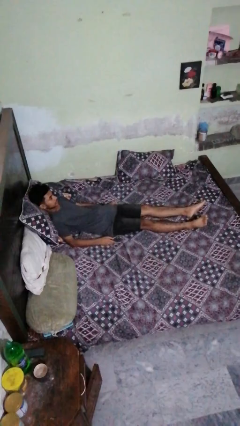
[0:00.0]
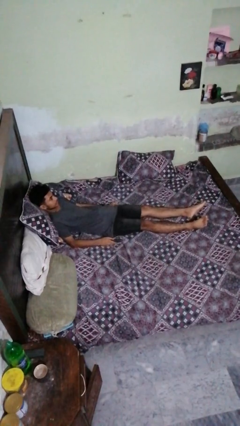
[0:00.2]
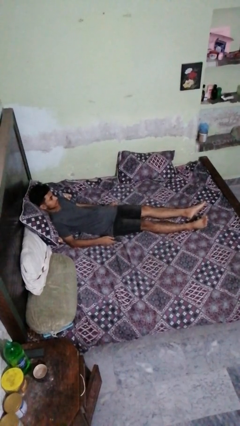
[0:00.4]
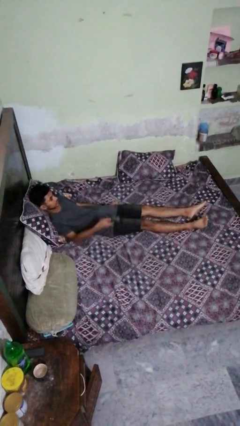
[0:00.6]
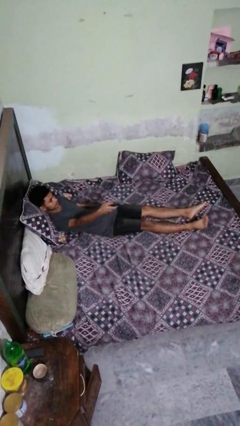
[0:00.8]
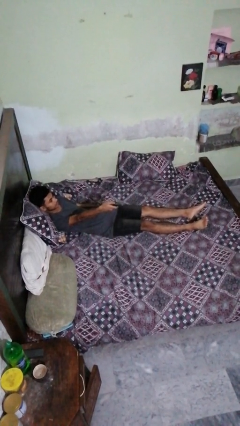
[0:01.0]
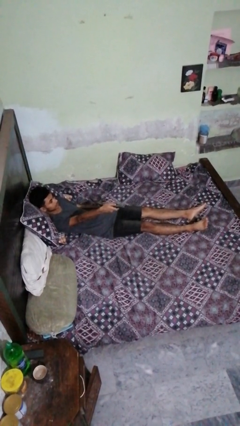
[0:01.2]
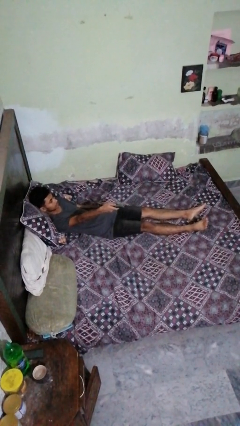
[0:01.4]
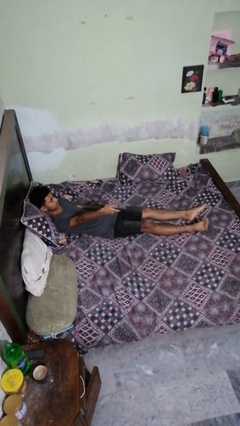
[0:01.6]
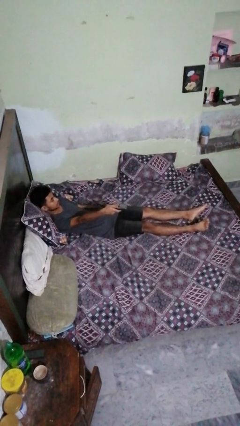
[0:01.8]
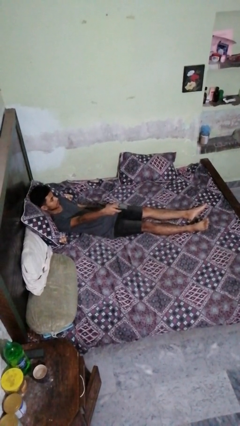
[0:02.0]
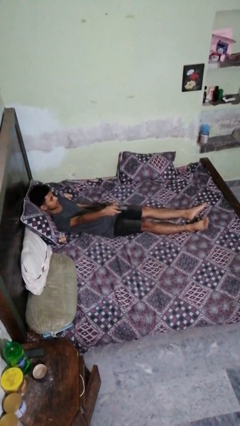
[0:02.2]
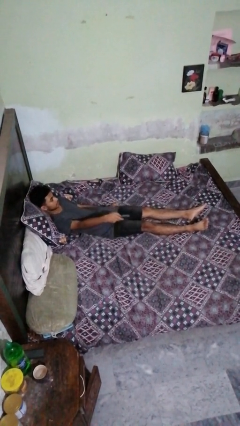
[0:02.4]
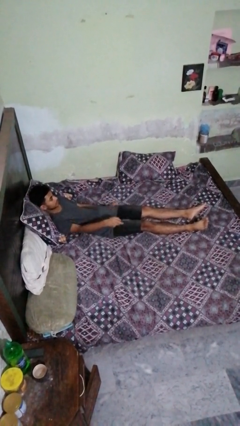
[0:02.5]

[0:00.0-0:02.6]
person uses television remote

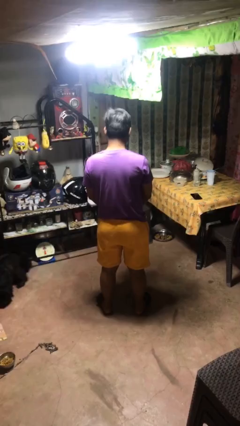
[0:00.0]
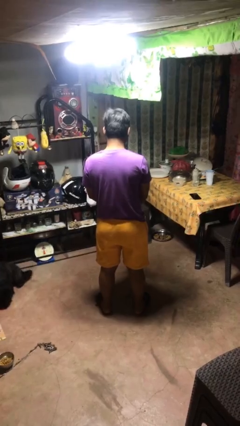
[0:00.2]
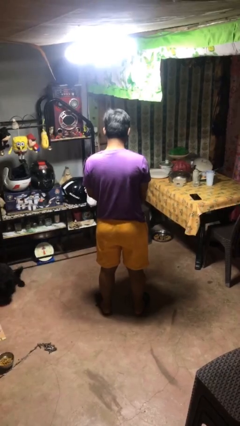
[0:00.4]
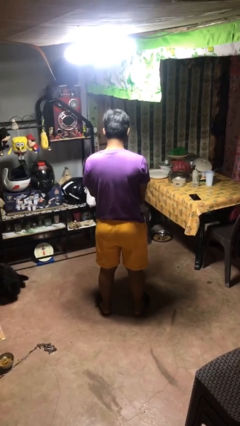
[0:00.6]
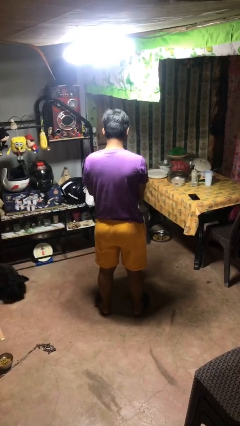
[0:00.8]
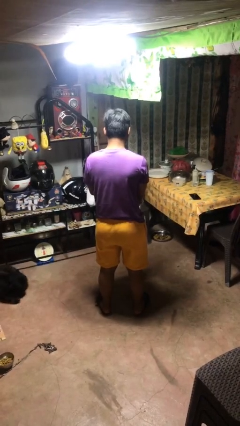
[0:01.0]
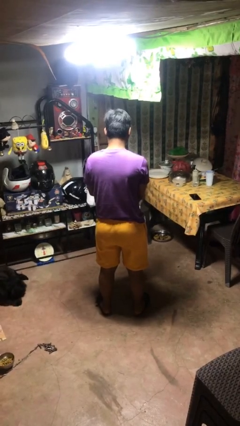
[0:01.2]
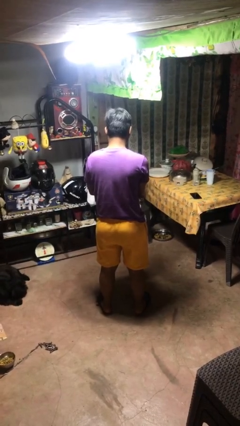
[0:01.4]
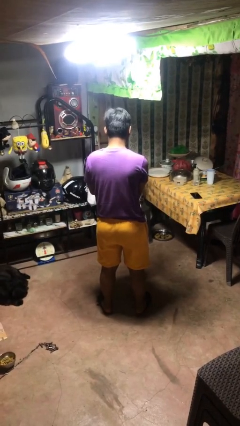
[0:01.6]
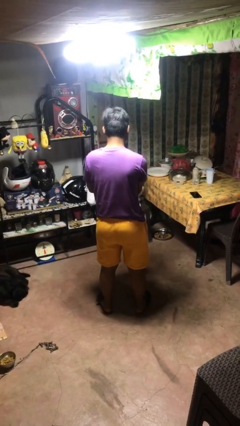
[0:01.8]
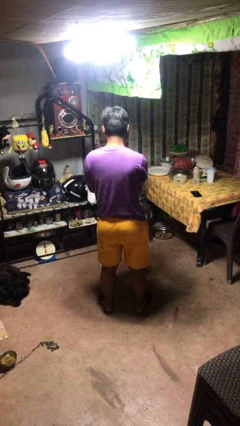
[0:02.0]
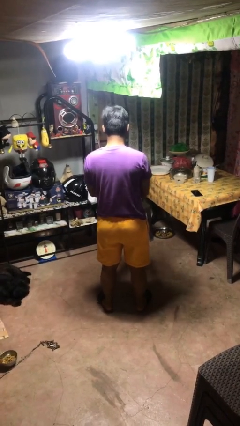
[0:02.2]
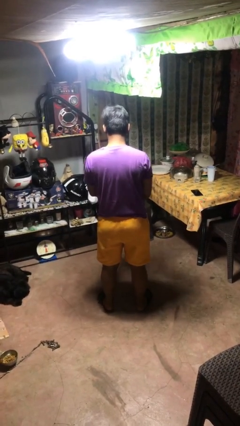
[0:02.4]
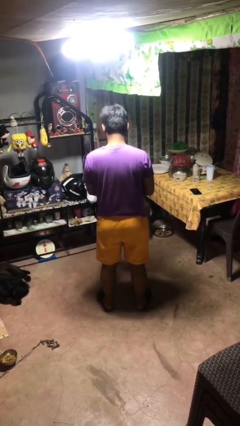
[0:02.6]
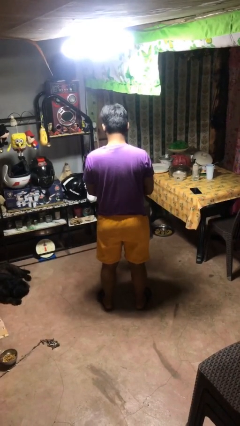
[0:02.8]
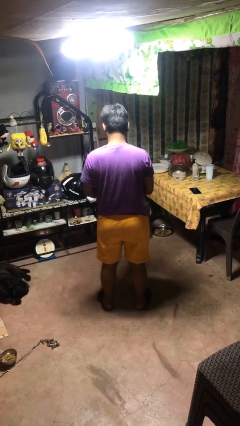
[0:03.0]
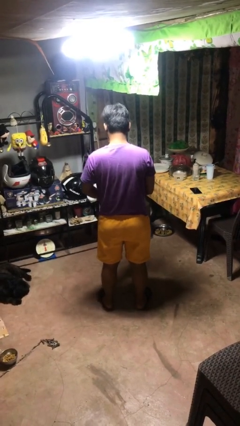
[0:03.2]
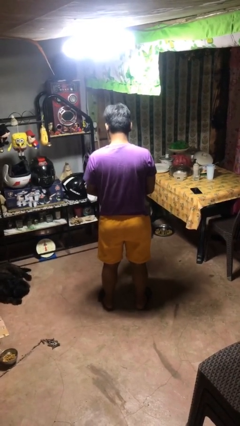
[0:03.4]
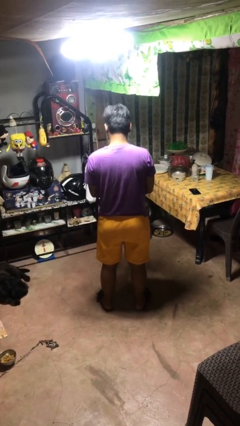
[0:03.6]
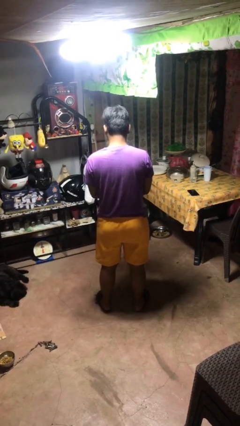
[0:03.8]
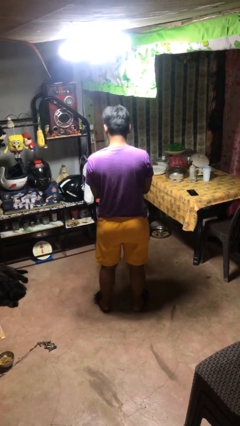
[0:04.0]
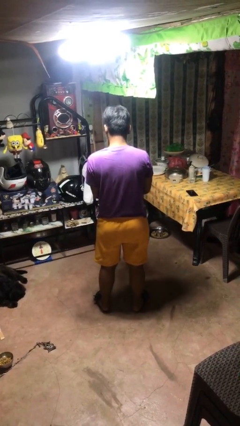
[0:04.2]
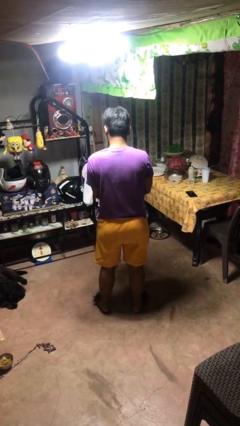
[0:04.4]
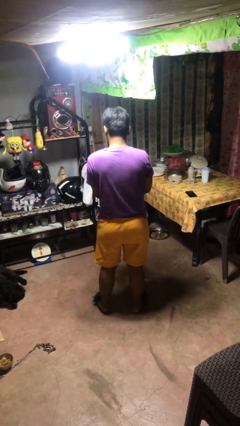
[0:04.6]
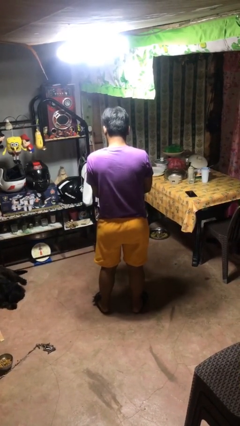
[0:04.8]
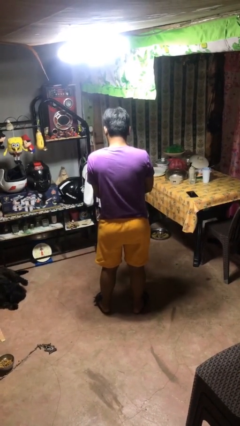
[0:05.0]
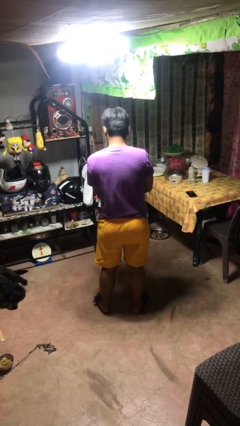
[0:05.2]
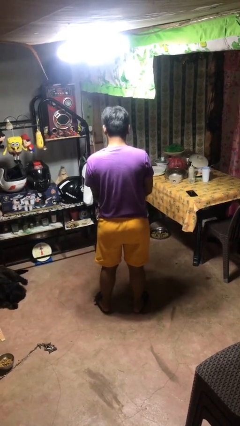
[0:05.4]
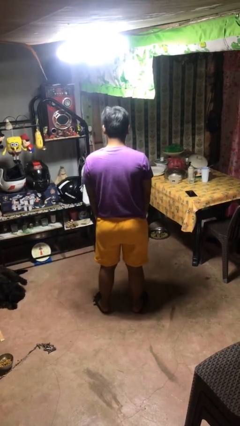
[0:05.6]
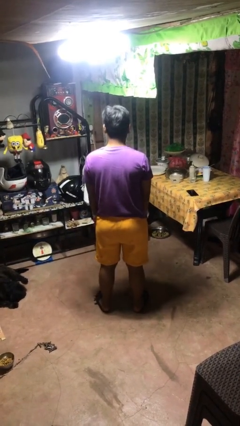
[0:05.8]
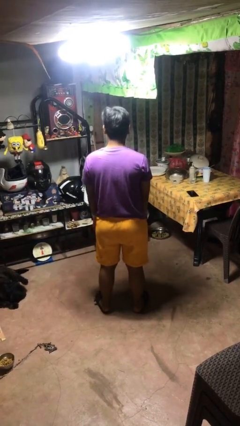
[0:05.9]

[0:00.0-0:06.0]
person puts on gloves

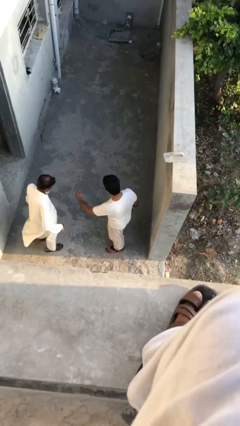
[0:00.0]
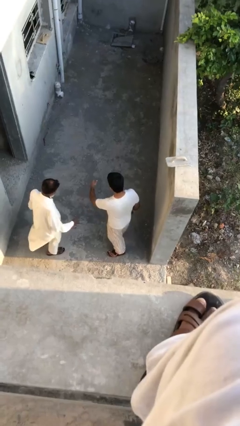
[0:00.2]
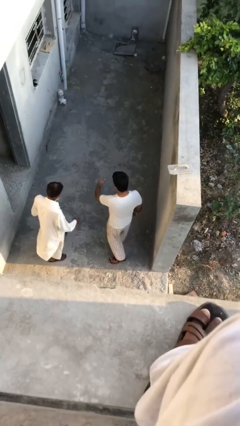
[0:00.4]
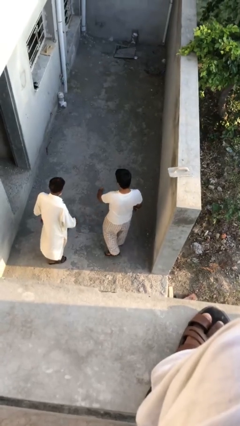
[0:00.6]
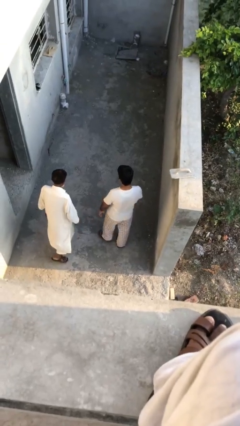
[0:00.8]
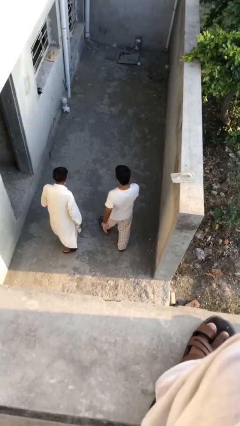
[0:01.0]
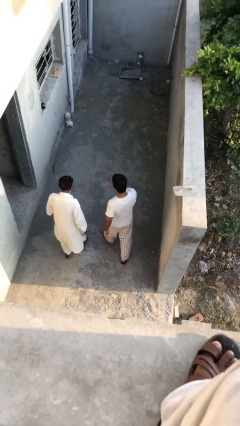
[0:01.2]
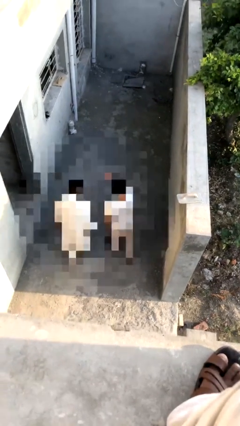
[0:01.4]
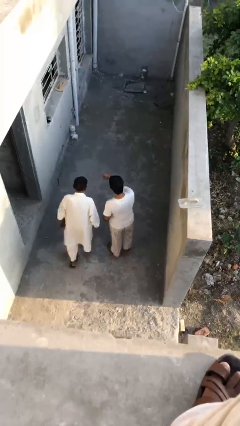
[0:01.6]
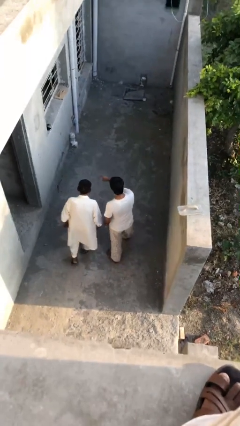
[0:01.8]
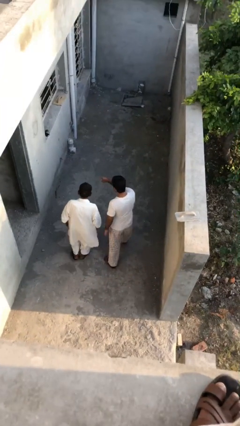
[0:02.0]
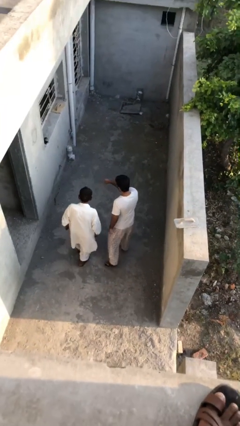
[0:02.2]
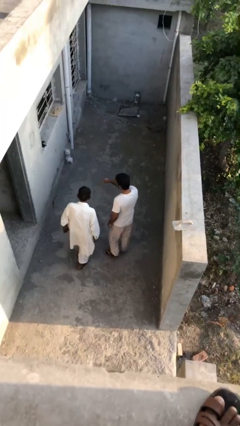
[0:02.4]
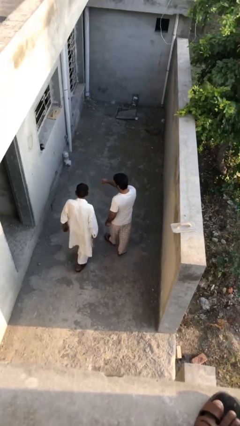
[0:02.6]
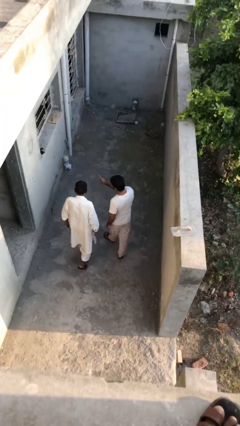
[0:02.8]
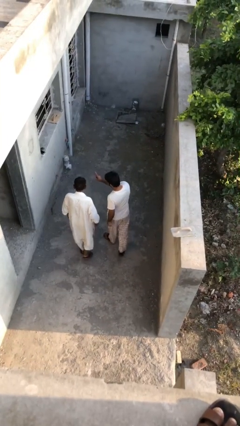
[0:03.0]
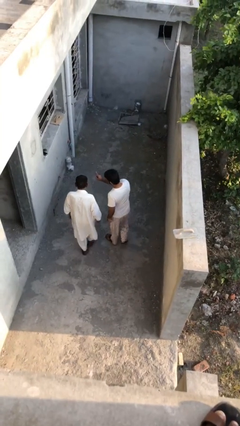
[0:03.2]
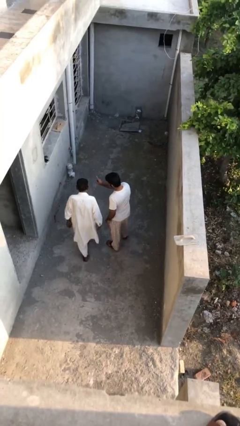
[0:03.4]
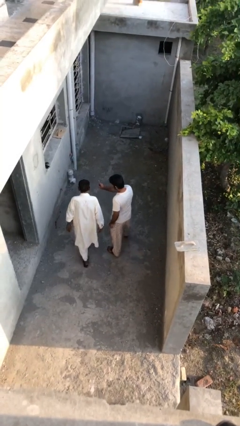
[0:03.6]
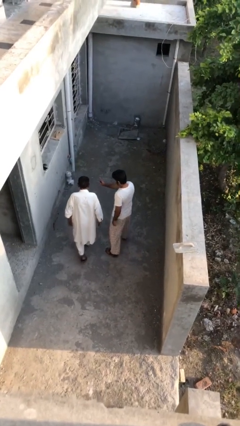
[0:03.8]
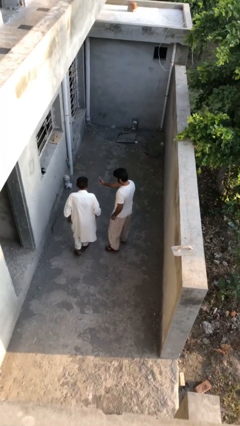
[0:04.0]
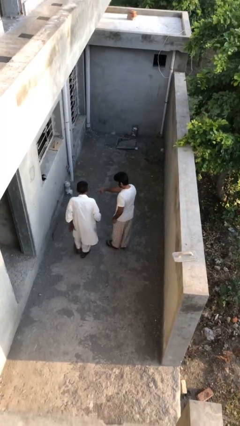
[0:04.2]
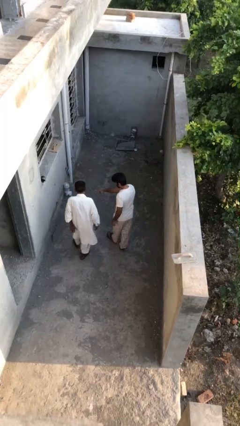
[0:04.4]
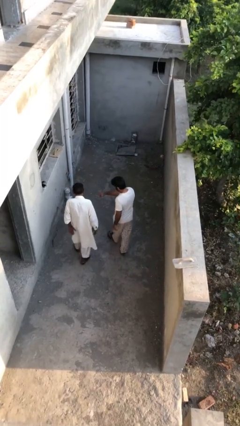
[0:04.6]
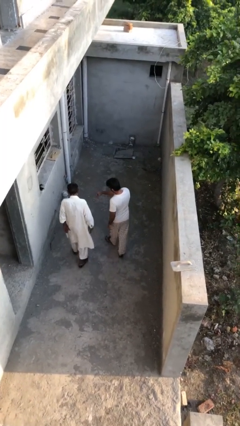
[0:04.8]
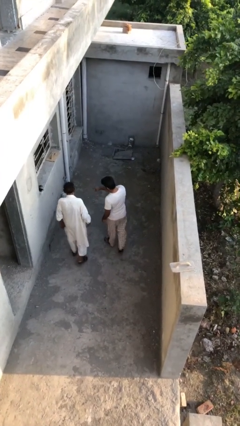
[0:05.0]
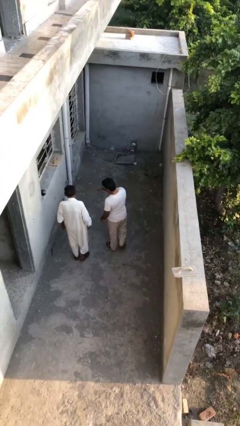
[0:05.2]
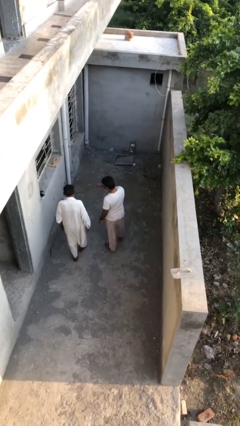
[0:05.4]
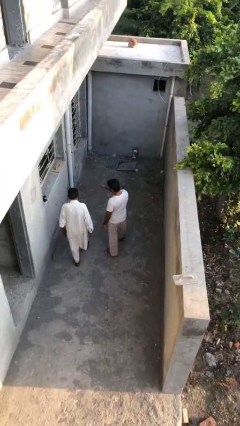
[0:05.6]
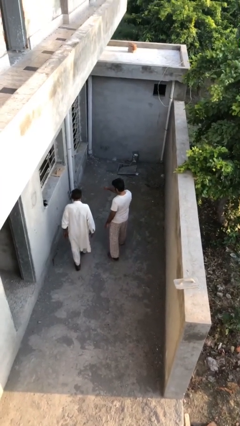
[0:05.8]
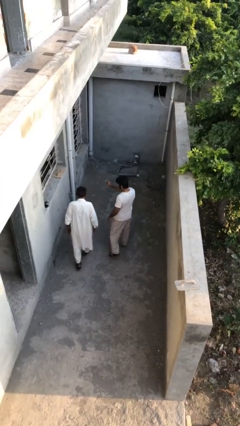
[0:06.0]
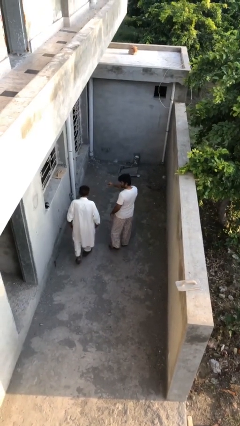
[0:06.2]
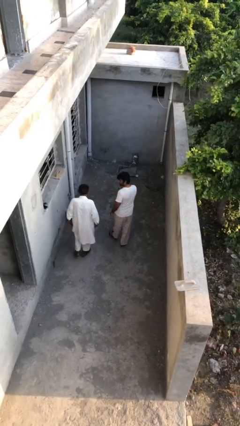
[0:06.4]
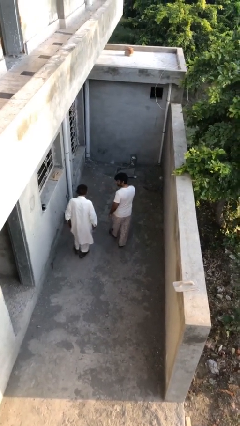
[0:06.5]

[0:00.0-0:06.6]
person talks to person

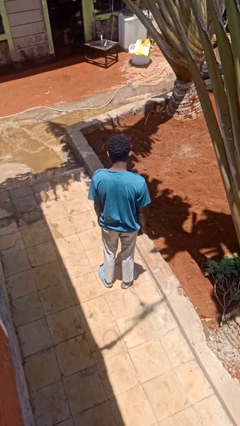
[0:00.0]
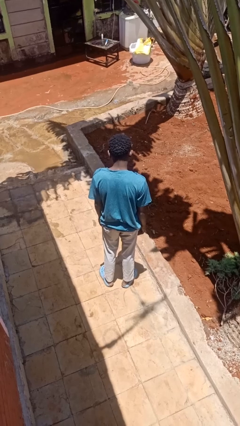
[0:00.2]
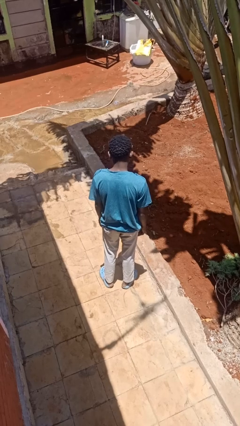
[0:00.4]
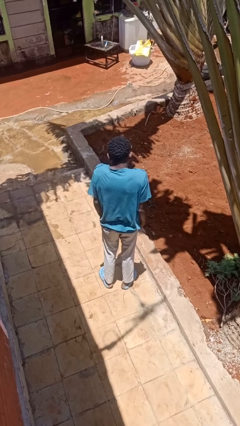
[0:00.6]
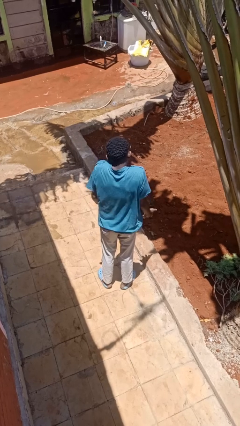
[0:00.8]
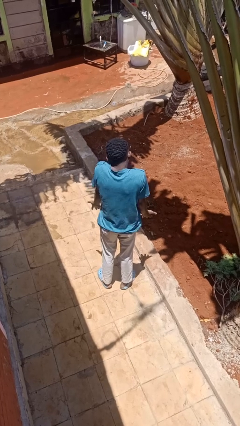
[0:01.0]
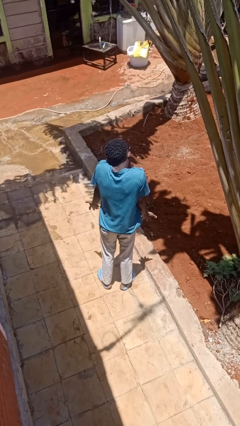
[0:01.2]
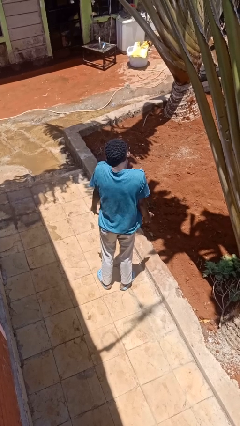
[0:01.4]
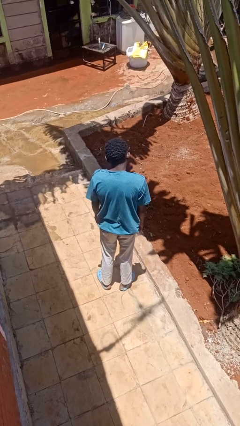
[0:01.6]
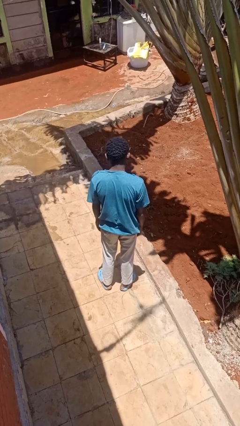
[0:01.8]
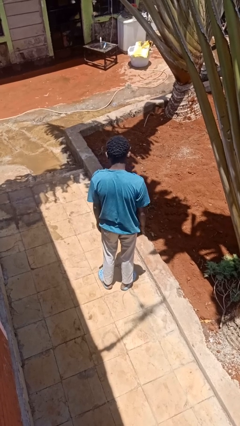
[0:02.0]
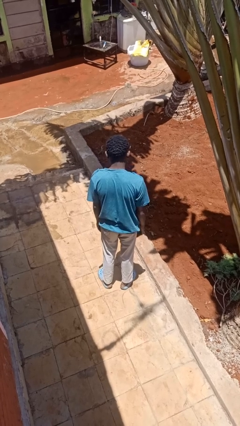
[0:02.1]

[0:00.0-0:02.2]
person shrugs

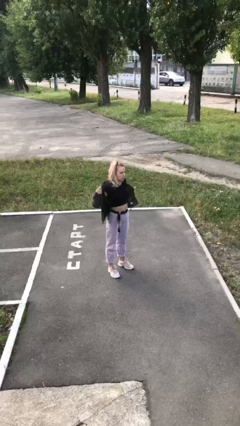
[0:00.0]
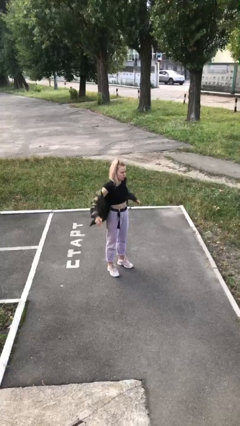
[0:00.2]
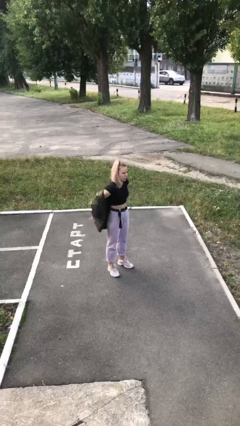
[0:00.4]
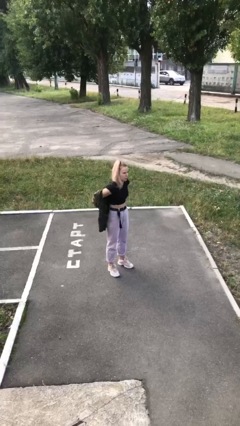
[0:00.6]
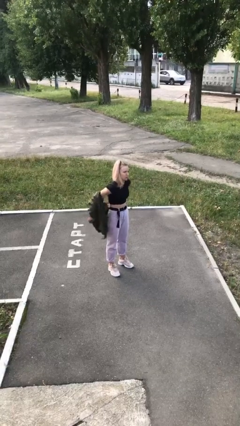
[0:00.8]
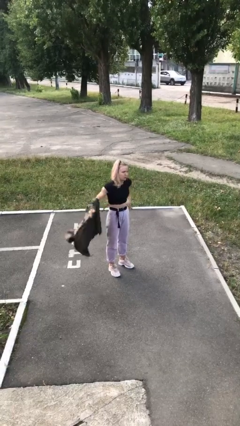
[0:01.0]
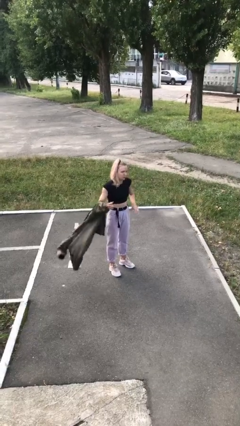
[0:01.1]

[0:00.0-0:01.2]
person takes off jacket
